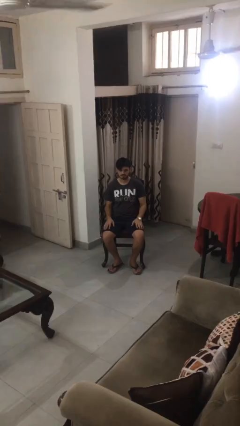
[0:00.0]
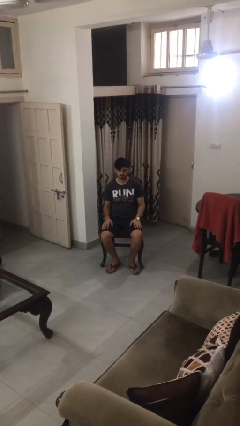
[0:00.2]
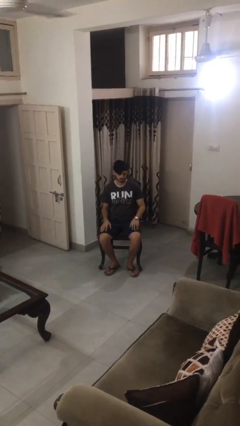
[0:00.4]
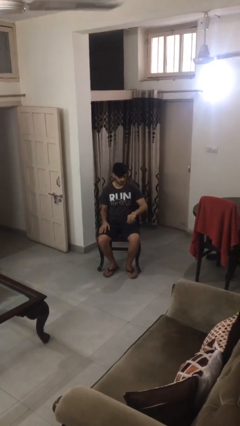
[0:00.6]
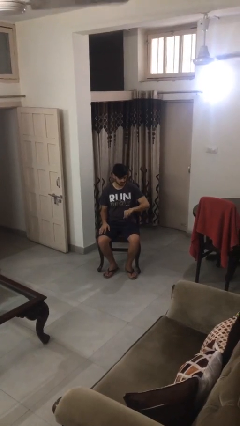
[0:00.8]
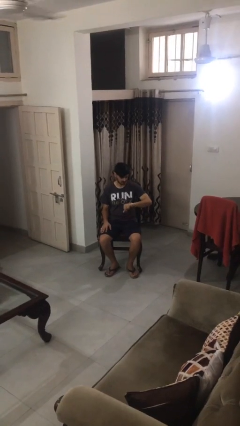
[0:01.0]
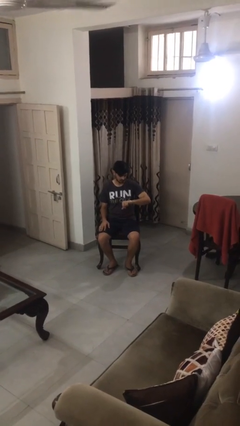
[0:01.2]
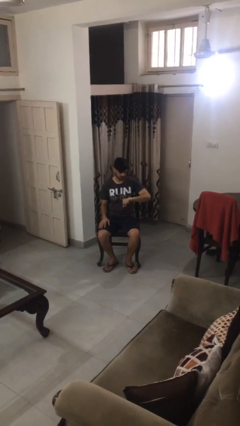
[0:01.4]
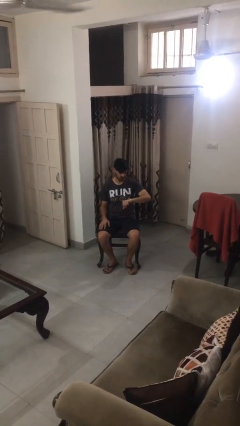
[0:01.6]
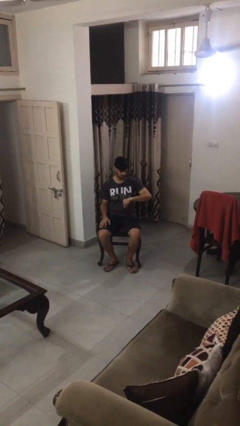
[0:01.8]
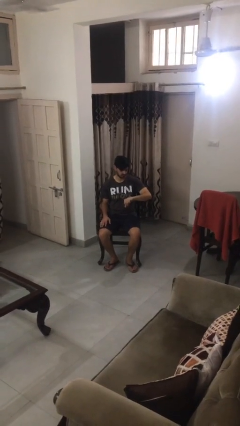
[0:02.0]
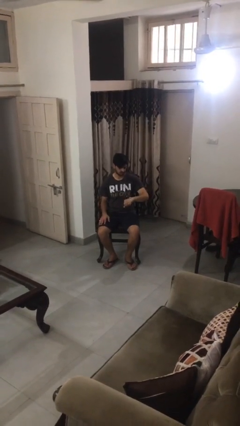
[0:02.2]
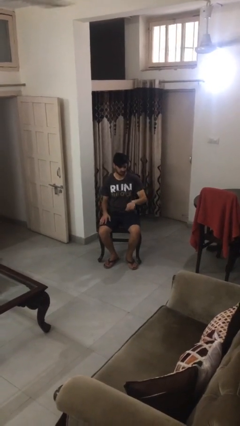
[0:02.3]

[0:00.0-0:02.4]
person looks at wristwatch

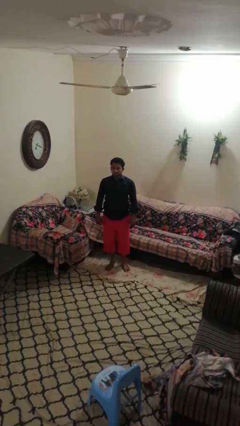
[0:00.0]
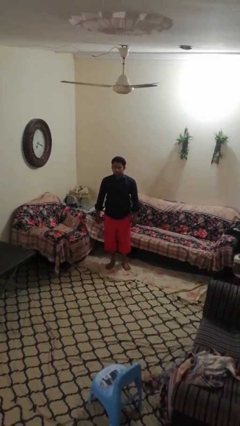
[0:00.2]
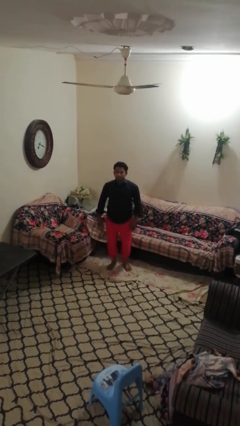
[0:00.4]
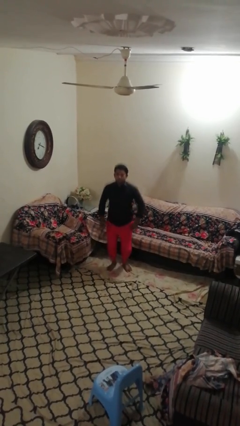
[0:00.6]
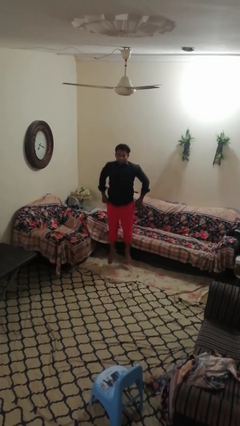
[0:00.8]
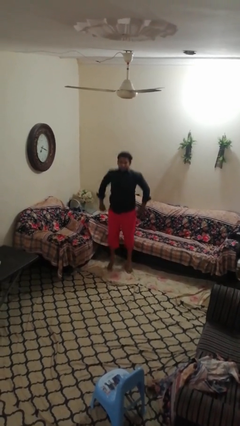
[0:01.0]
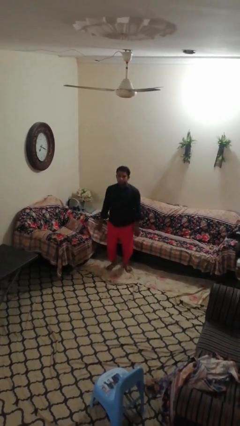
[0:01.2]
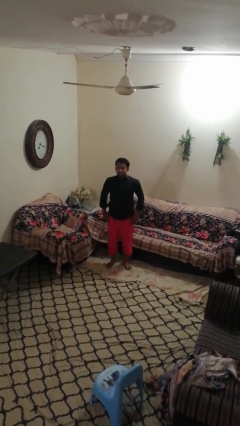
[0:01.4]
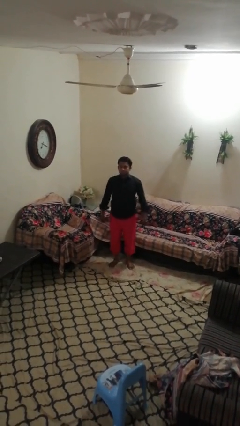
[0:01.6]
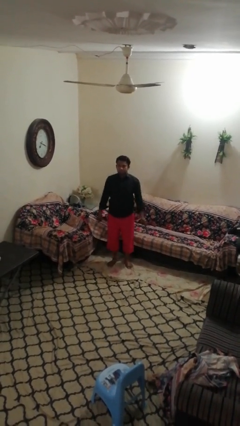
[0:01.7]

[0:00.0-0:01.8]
person jumps

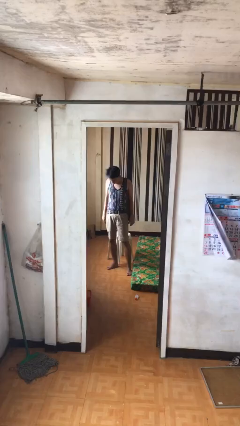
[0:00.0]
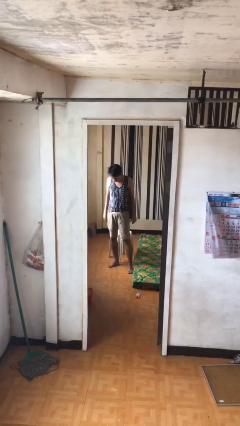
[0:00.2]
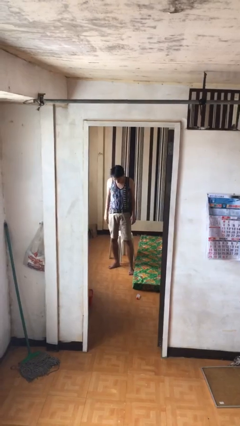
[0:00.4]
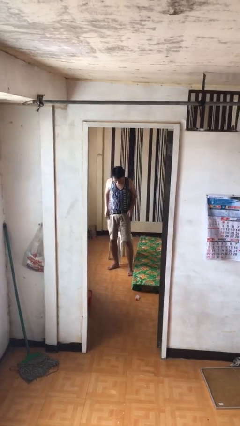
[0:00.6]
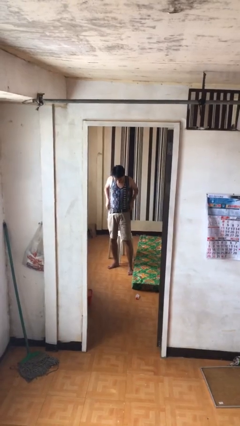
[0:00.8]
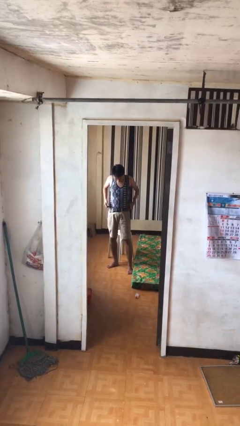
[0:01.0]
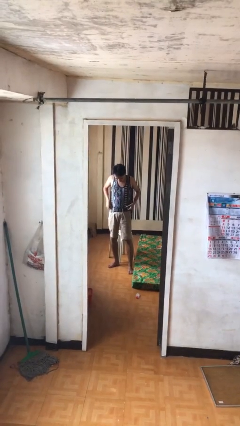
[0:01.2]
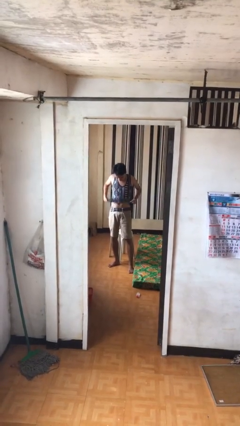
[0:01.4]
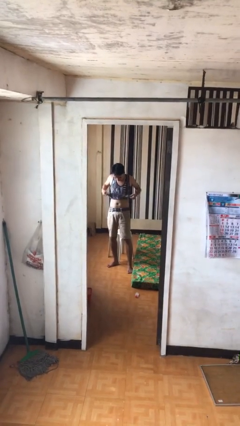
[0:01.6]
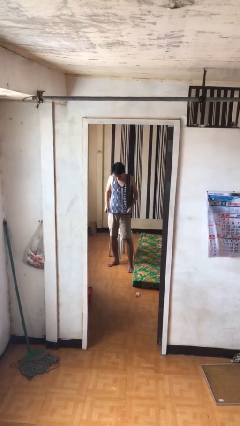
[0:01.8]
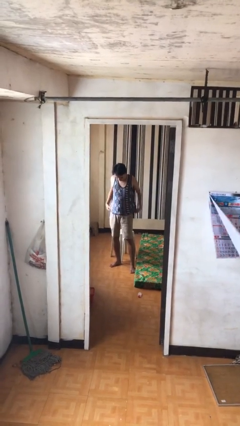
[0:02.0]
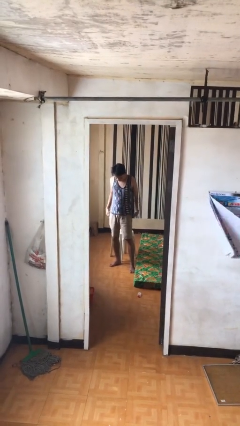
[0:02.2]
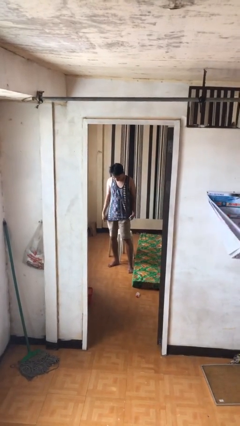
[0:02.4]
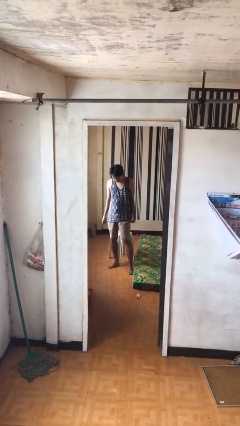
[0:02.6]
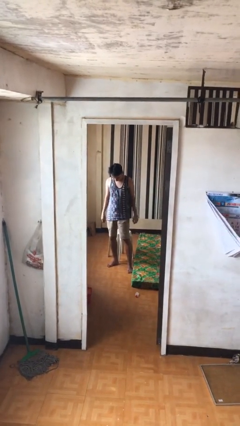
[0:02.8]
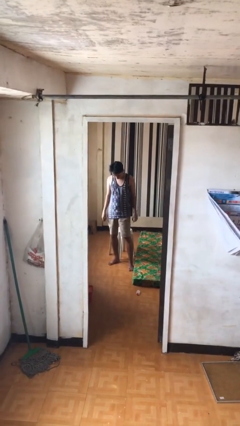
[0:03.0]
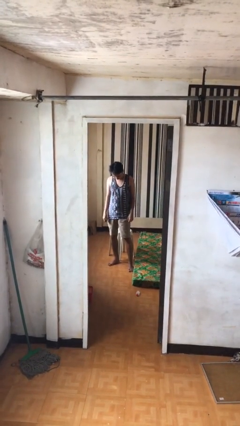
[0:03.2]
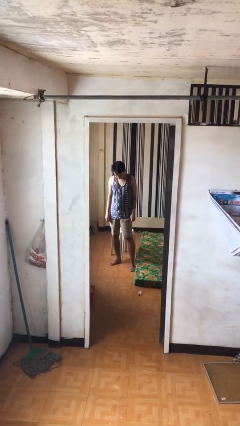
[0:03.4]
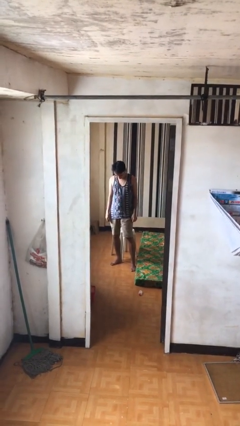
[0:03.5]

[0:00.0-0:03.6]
person untucks shirt

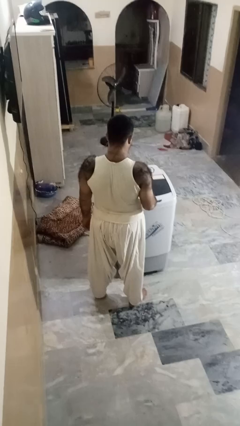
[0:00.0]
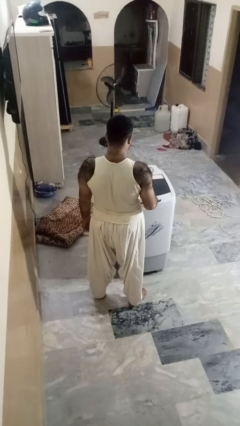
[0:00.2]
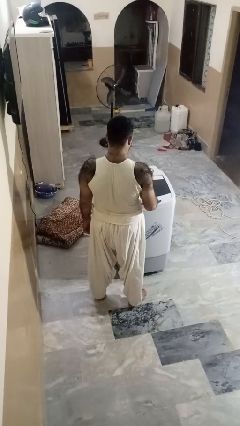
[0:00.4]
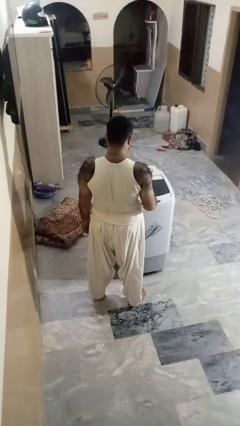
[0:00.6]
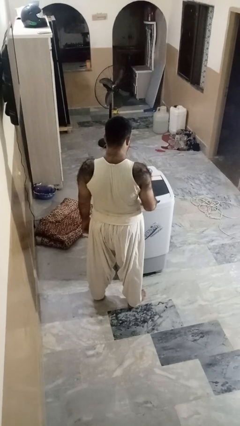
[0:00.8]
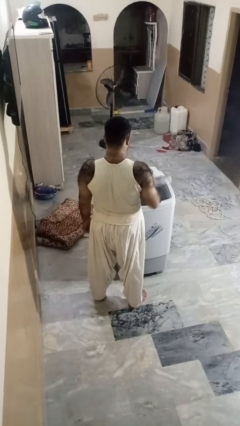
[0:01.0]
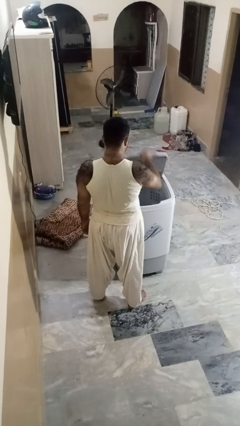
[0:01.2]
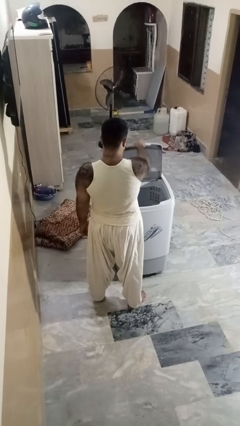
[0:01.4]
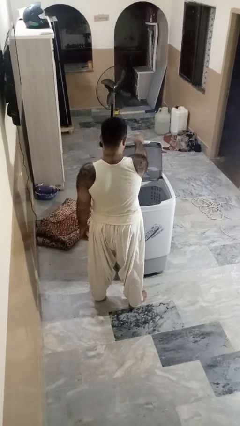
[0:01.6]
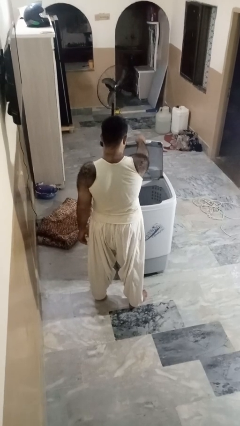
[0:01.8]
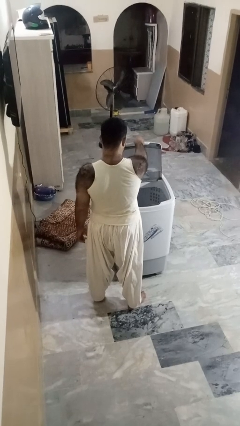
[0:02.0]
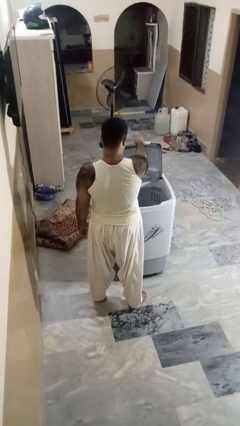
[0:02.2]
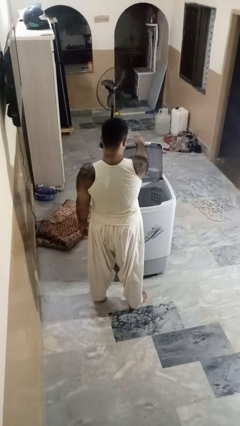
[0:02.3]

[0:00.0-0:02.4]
person opens clothes washer

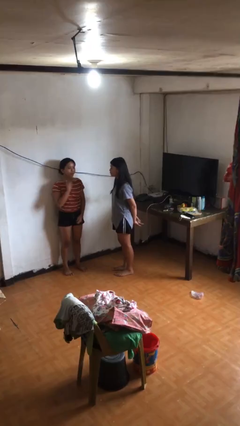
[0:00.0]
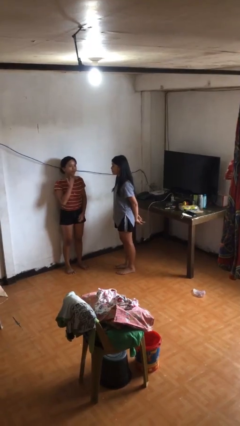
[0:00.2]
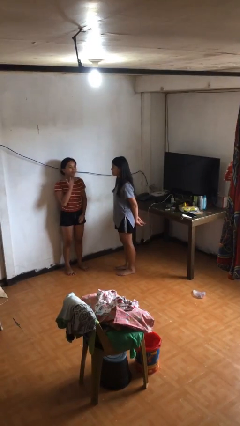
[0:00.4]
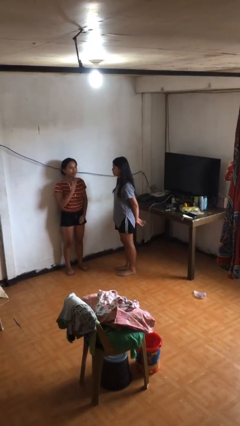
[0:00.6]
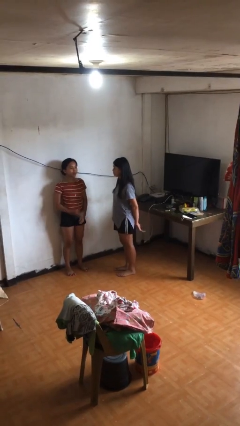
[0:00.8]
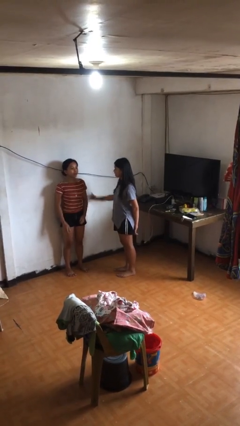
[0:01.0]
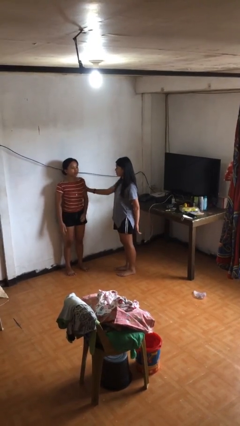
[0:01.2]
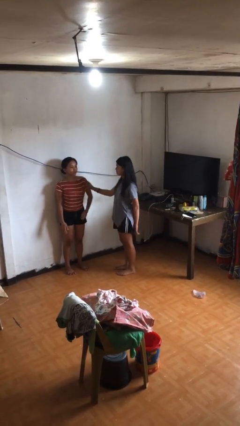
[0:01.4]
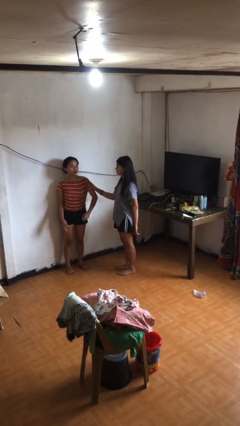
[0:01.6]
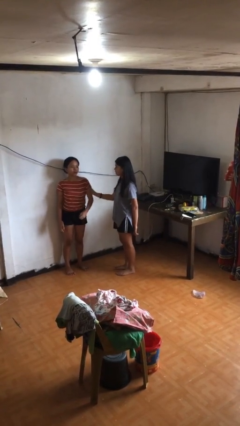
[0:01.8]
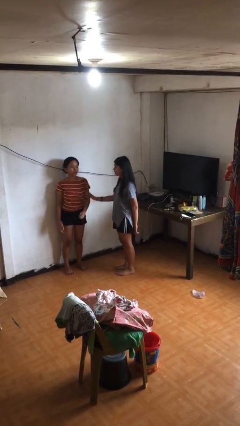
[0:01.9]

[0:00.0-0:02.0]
person grabs person by bicep

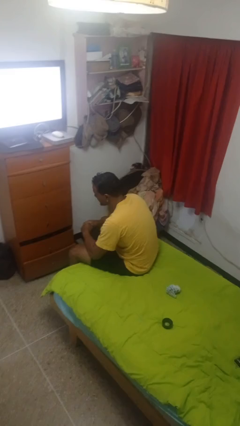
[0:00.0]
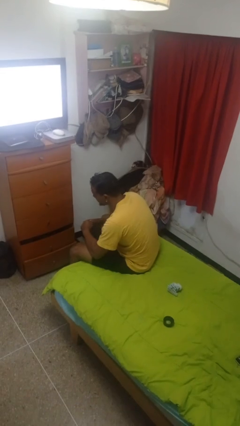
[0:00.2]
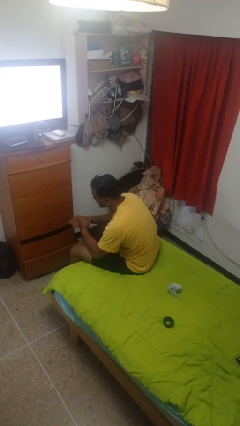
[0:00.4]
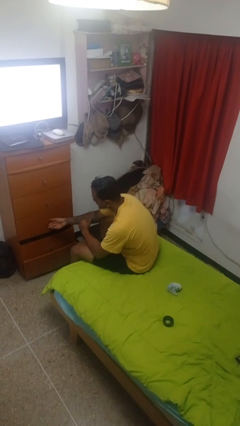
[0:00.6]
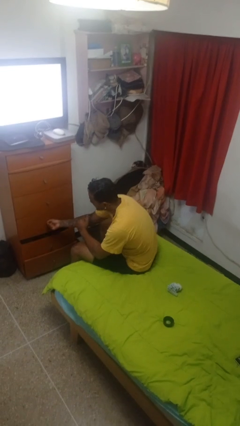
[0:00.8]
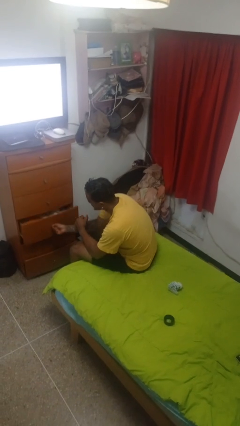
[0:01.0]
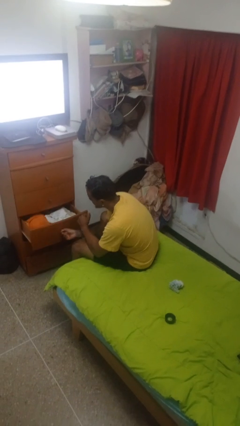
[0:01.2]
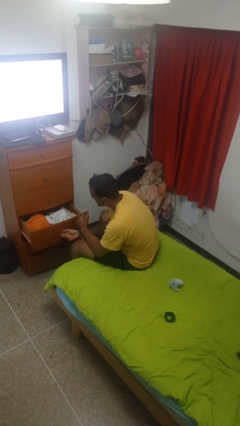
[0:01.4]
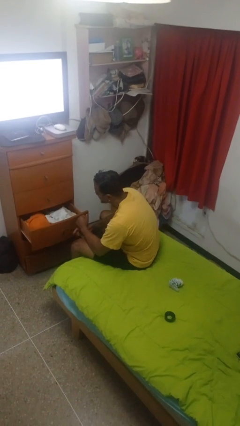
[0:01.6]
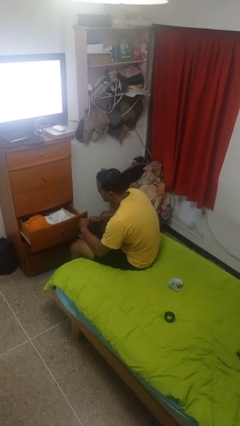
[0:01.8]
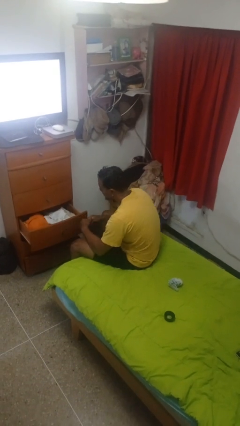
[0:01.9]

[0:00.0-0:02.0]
person opens dresser drawer

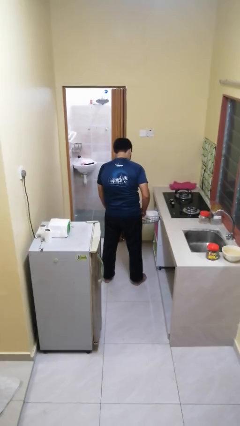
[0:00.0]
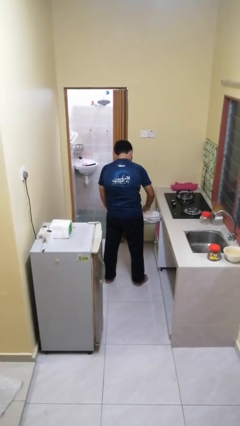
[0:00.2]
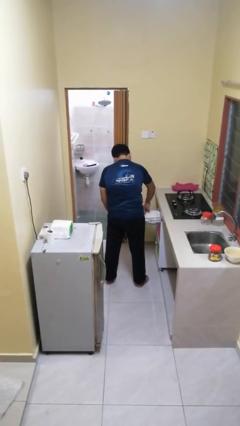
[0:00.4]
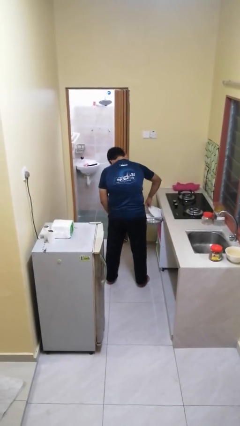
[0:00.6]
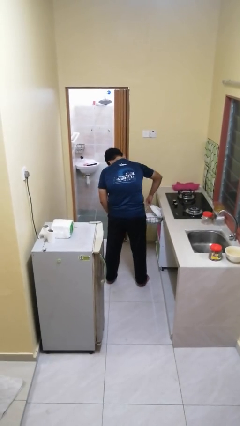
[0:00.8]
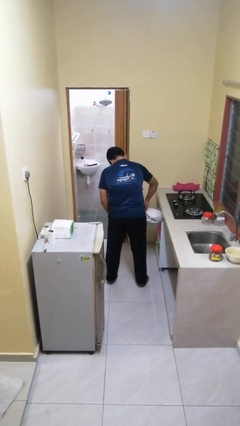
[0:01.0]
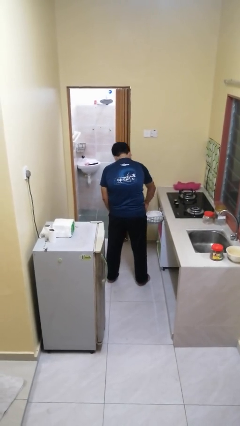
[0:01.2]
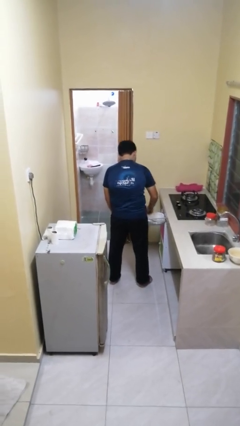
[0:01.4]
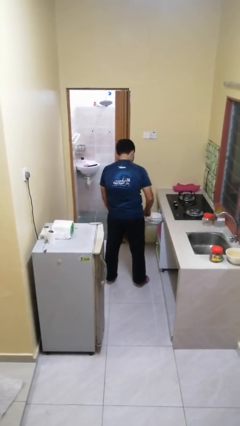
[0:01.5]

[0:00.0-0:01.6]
person searches in kitchen drawer

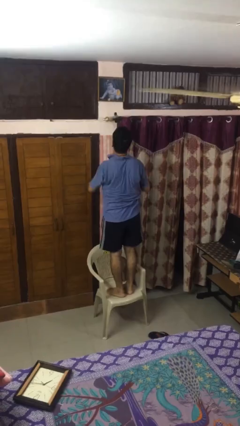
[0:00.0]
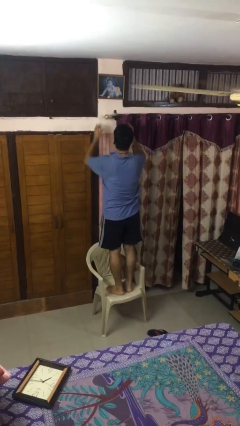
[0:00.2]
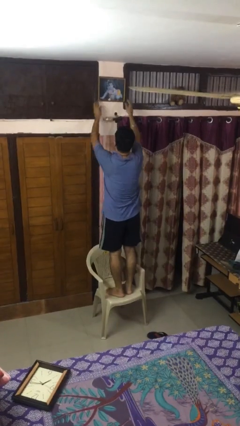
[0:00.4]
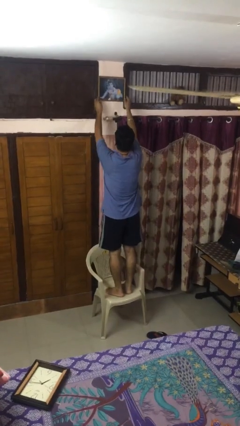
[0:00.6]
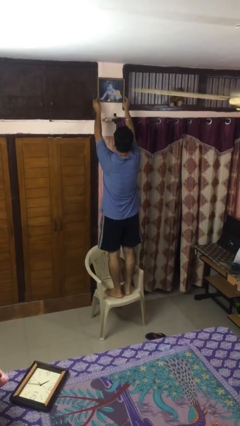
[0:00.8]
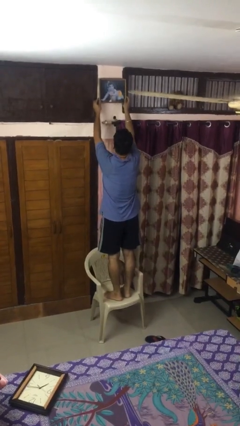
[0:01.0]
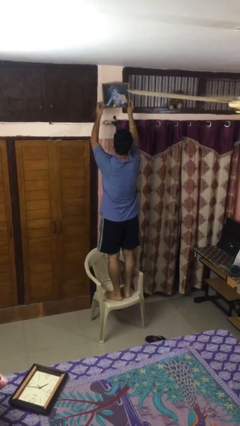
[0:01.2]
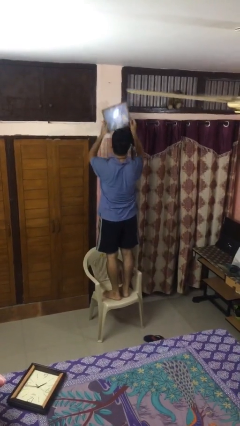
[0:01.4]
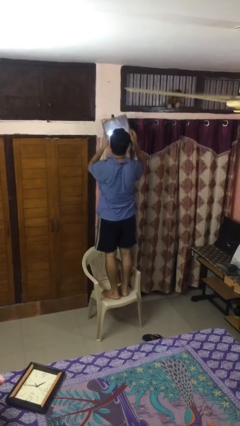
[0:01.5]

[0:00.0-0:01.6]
person takes down picture frame
